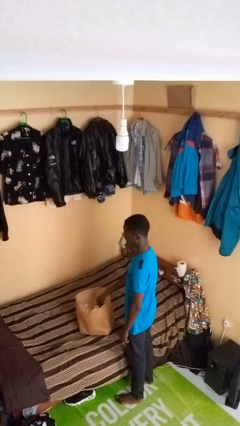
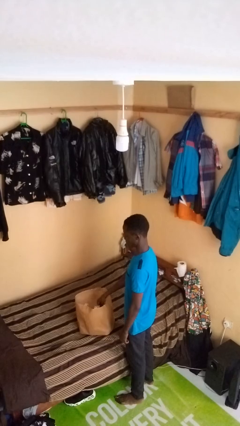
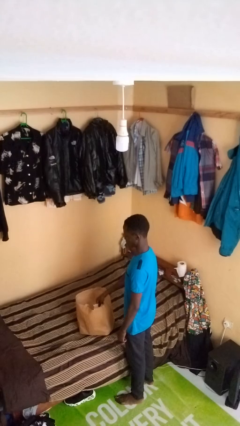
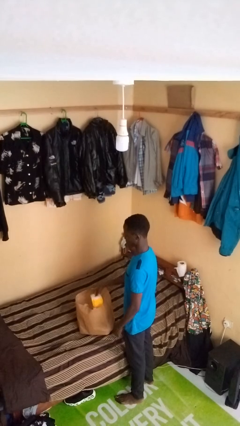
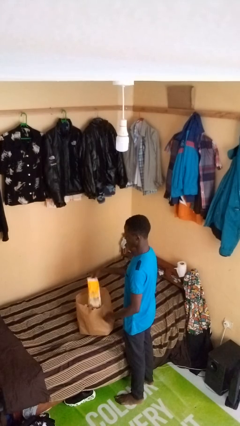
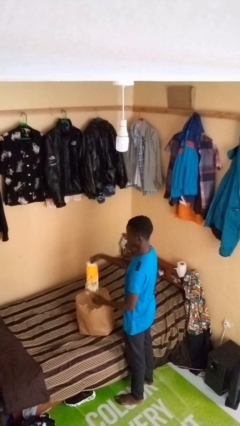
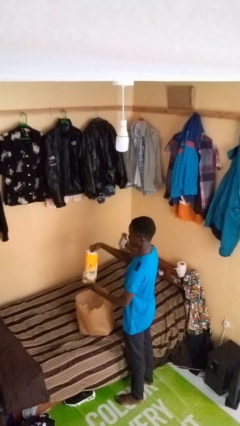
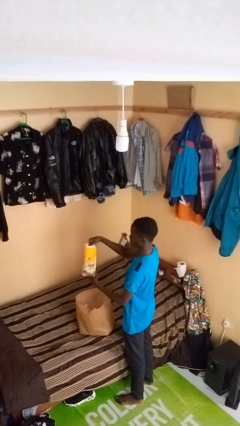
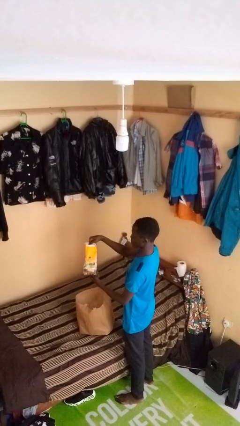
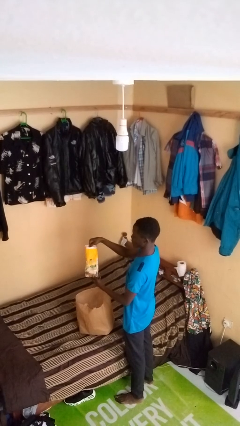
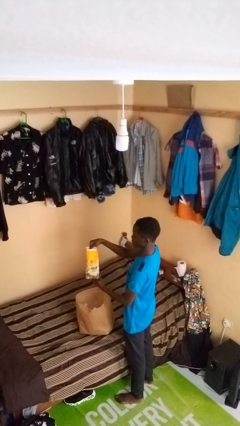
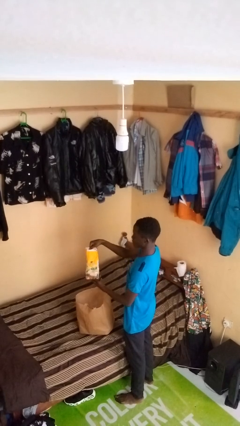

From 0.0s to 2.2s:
person takes object from bag

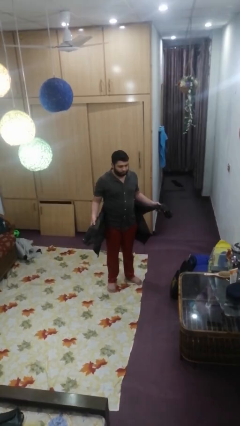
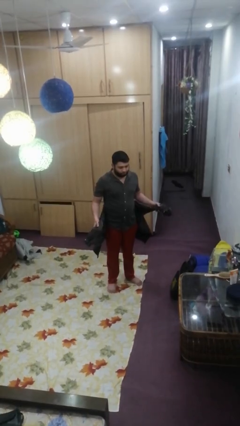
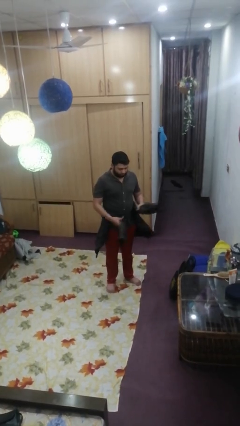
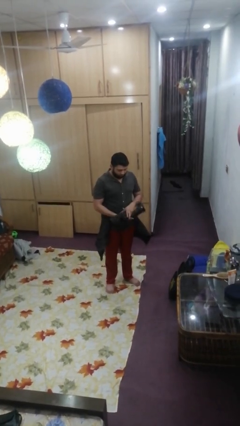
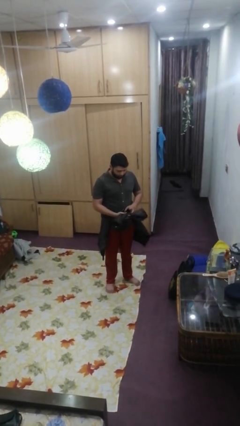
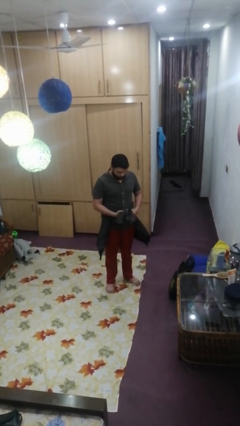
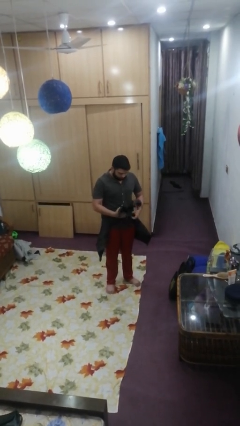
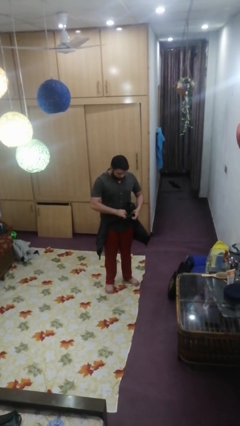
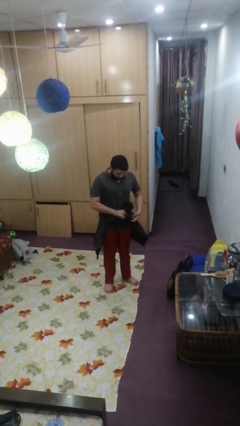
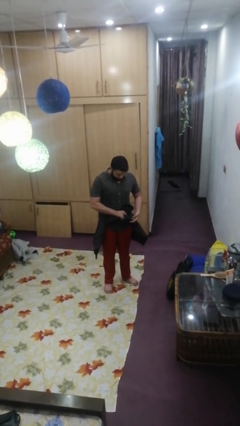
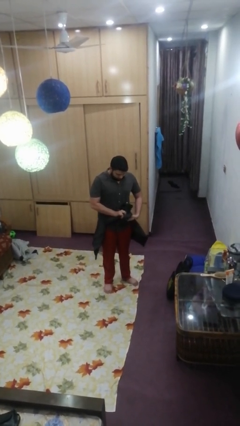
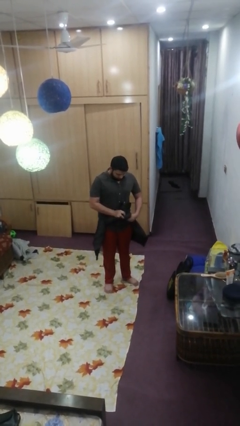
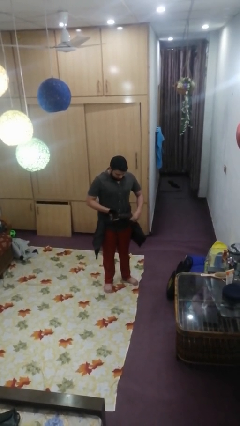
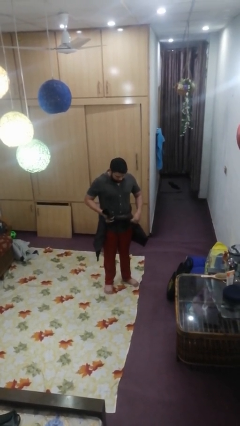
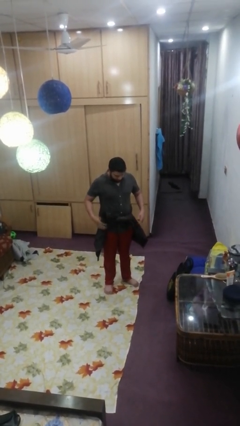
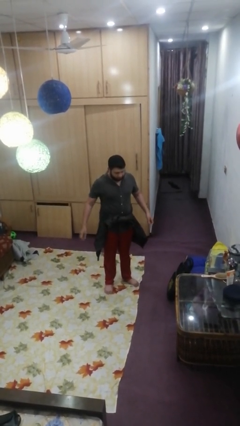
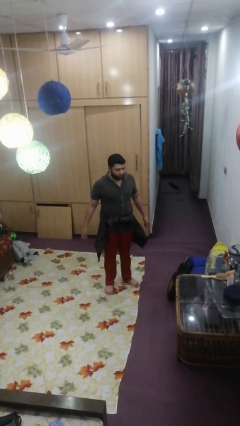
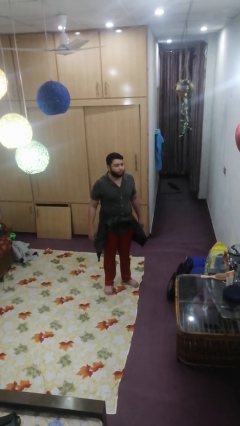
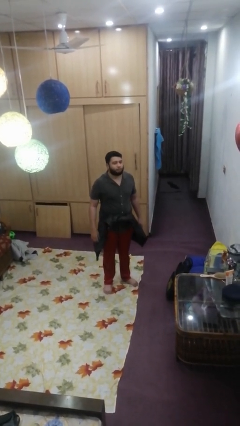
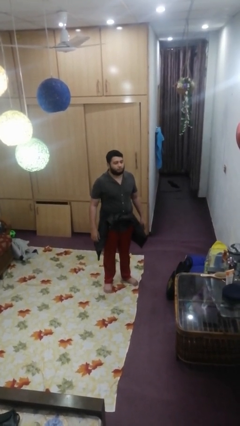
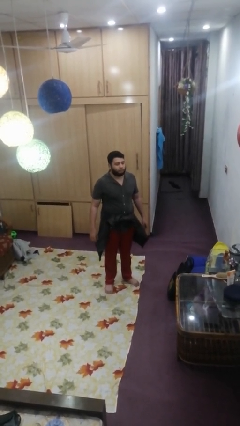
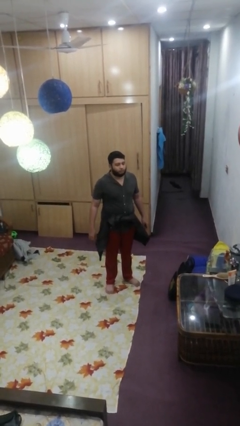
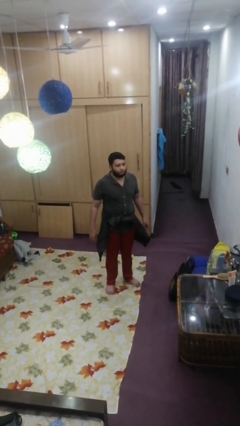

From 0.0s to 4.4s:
person ties jacket around waist

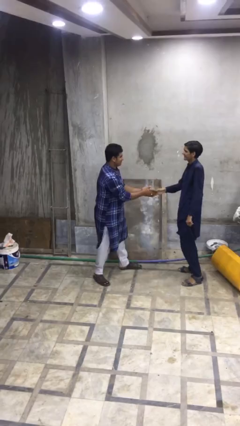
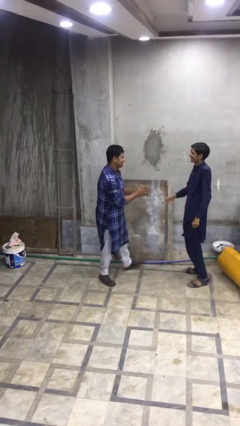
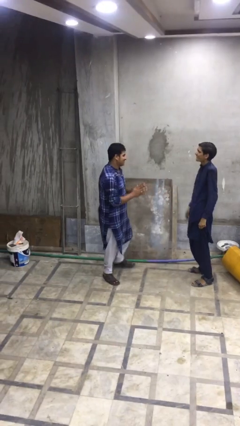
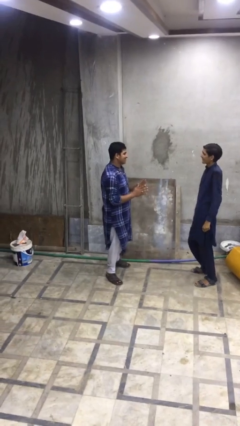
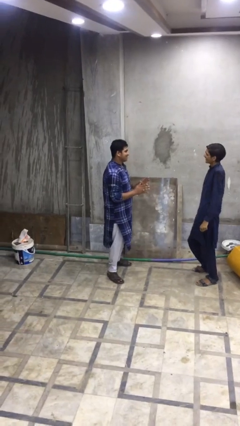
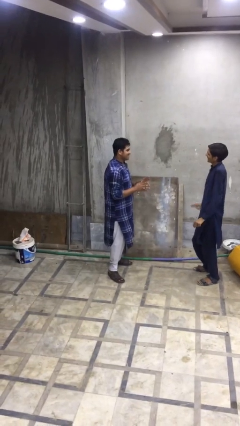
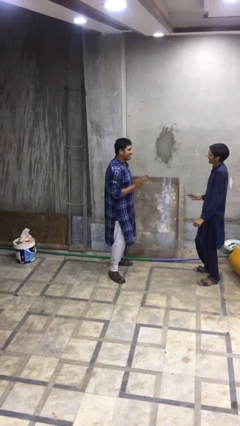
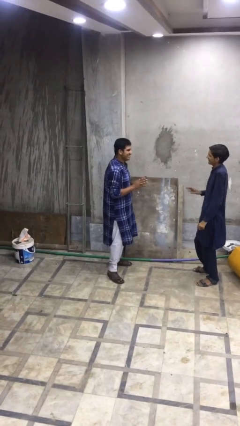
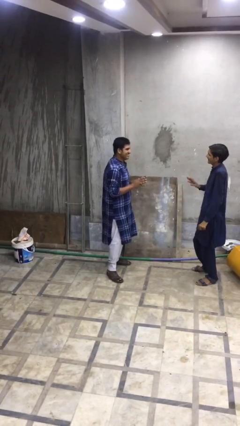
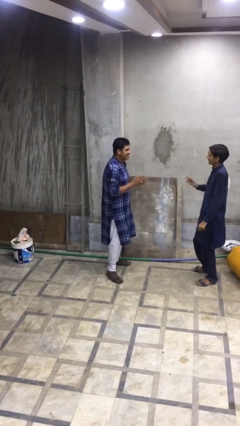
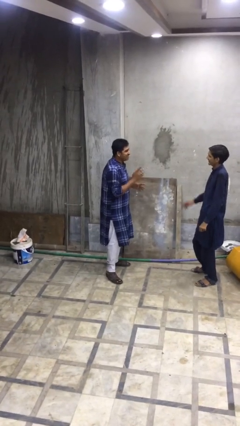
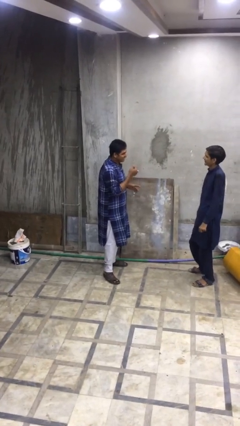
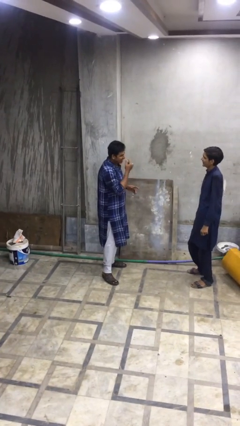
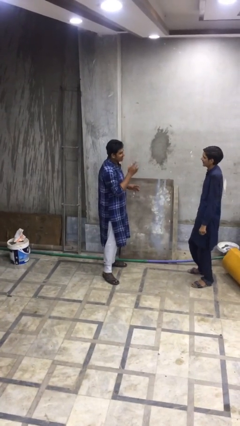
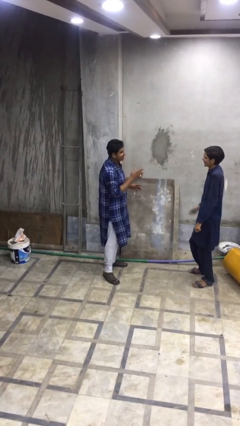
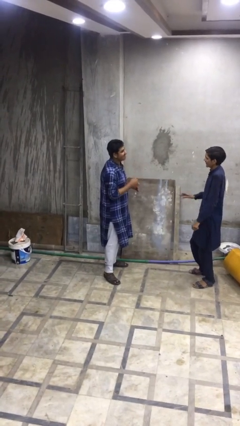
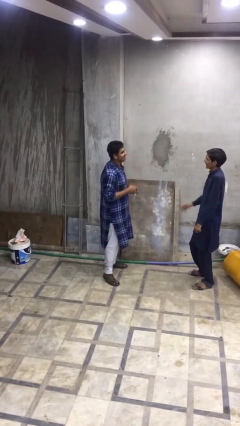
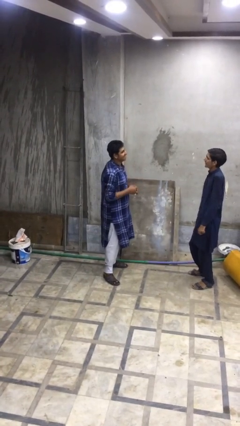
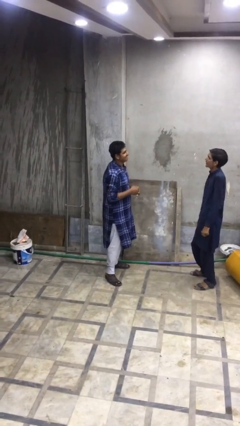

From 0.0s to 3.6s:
person talks to person

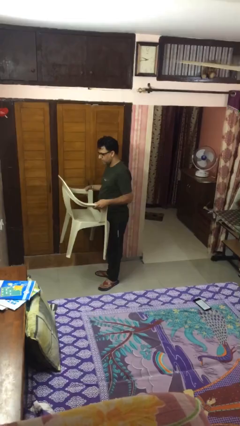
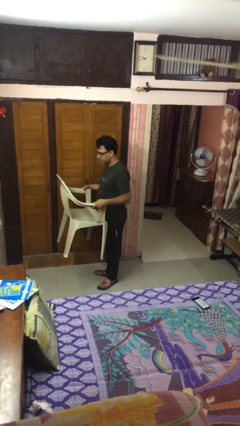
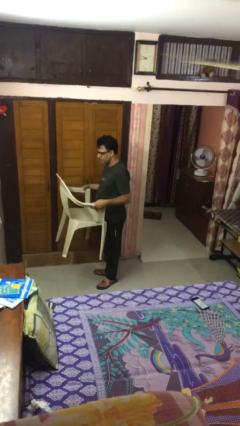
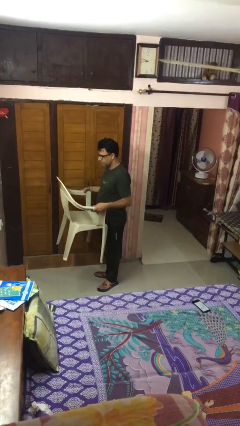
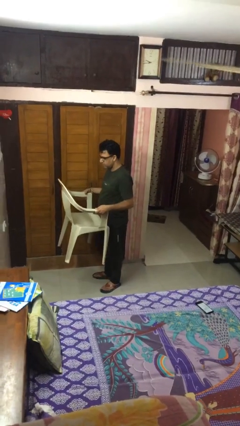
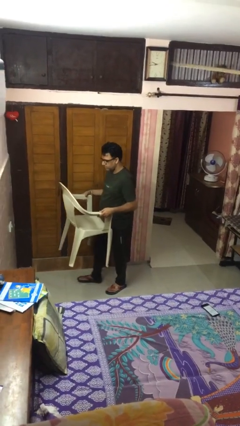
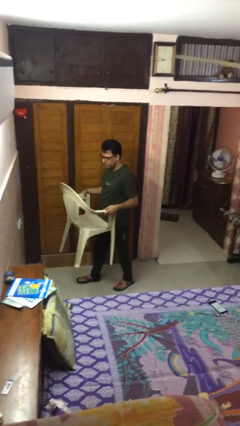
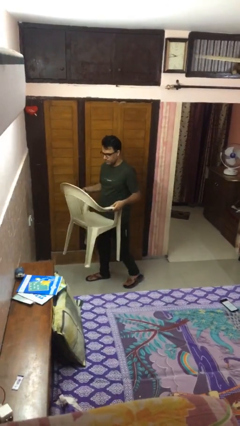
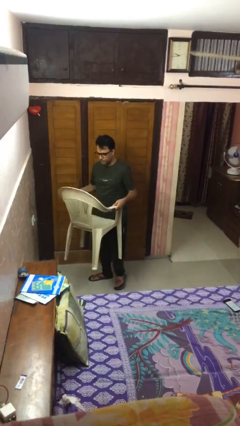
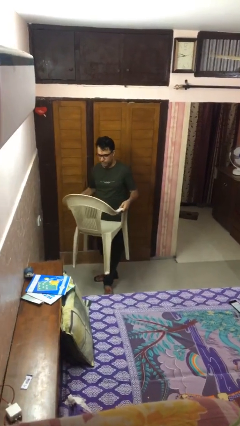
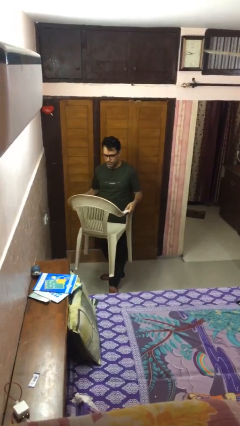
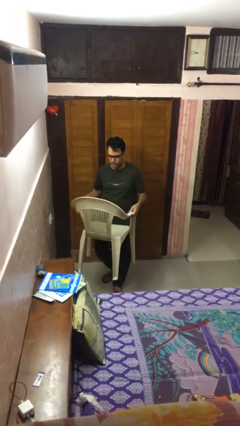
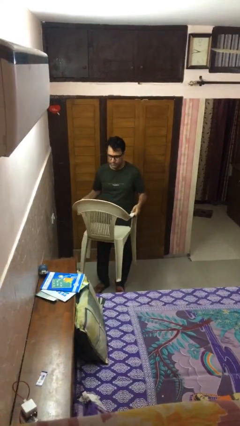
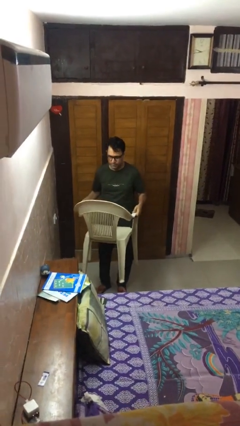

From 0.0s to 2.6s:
person carries furniture

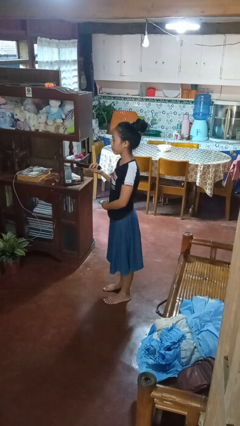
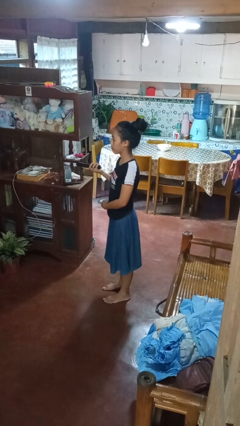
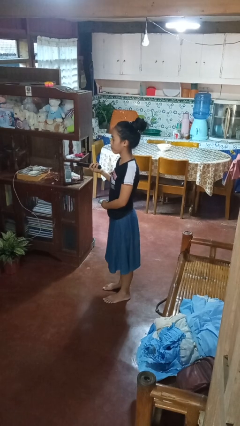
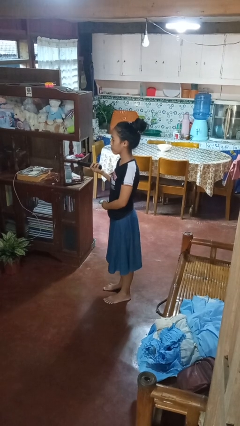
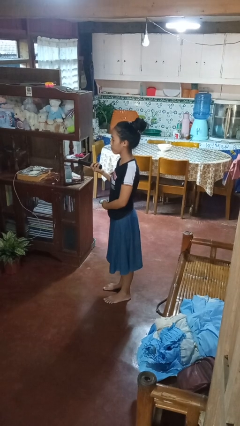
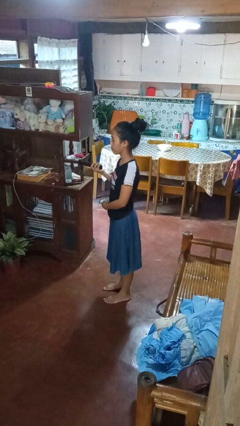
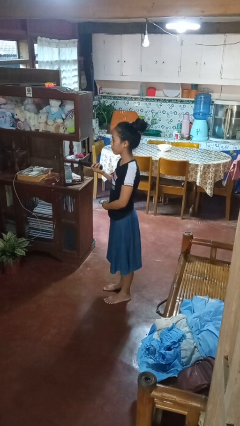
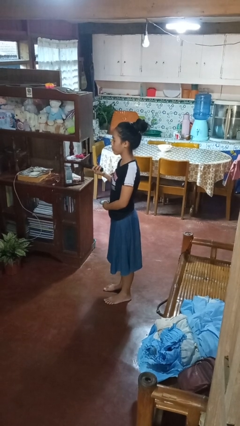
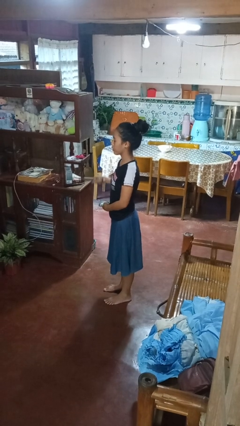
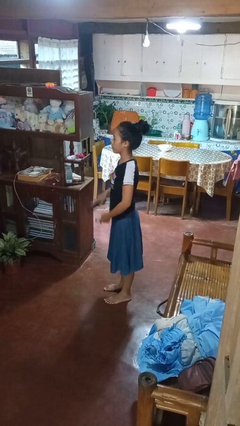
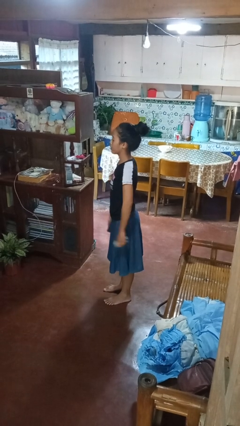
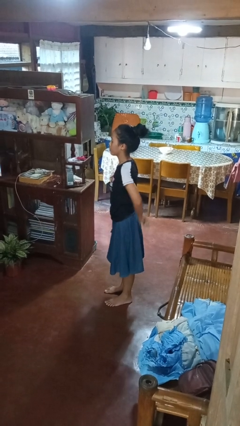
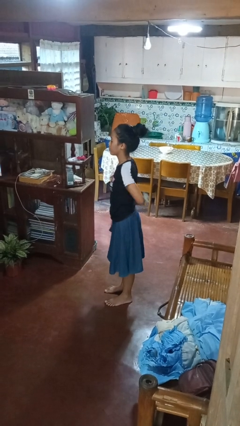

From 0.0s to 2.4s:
person uses television remote

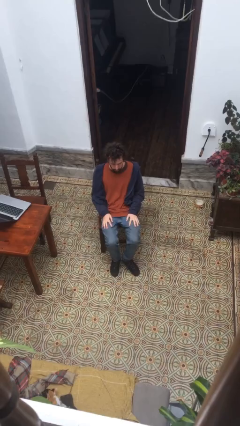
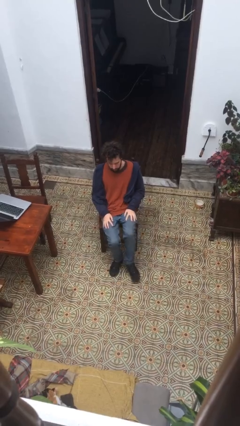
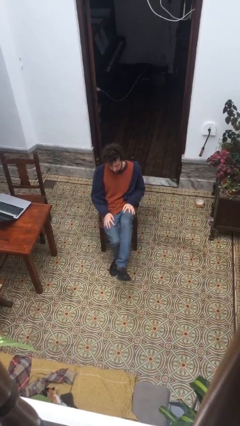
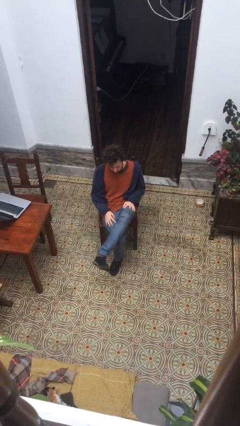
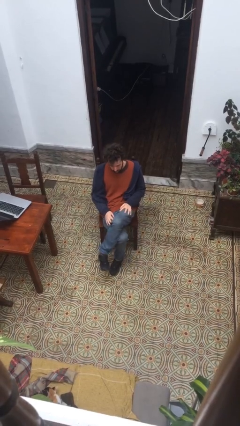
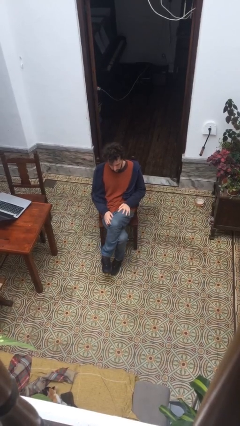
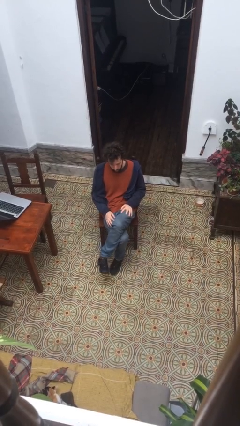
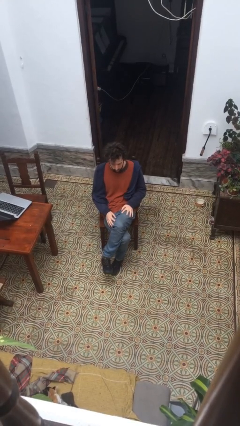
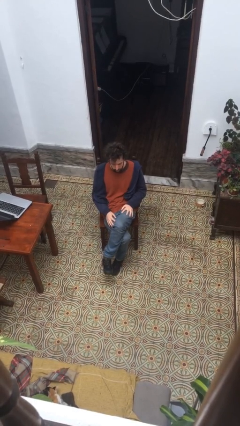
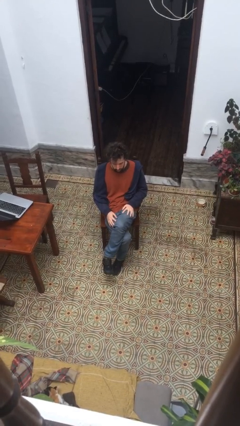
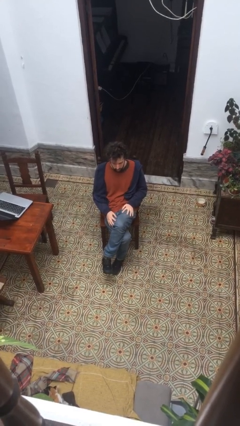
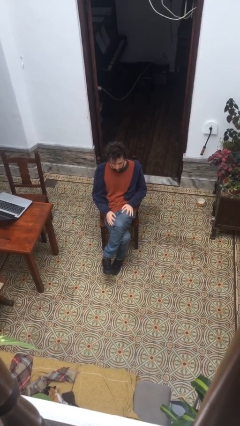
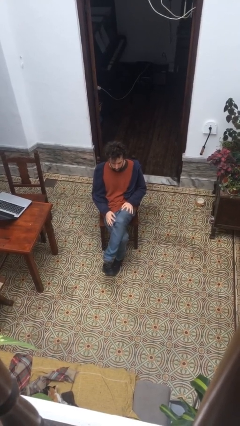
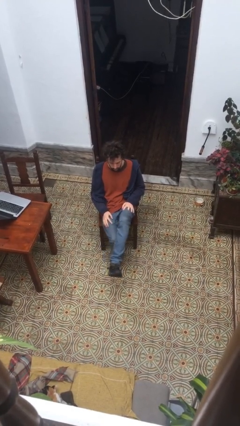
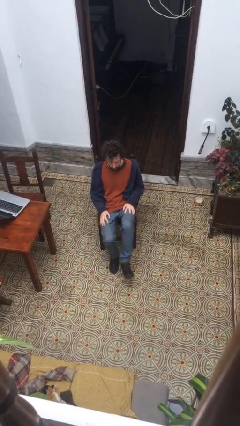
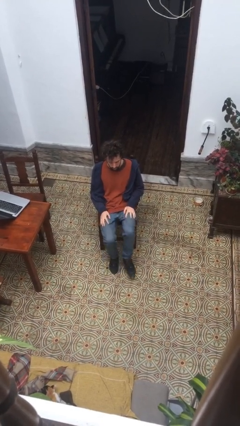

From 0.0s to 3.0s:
person crosses legs
